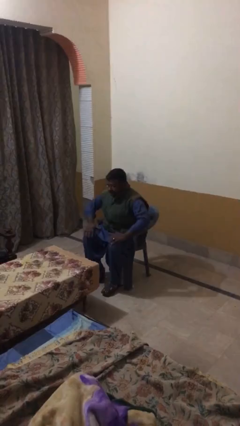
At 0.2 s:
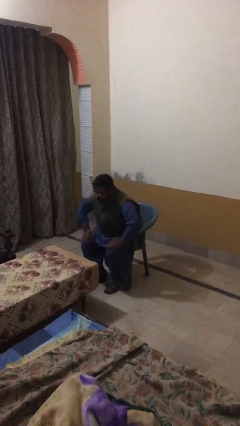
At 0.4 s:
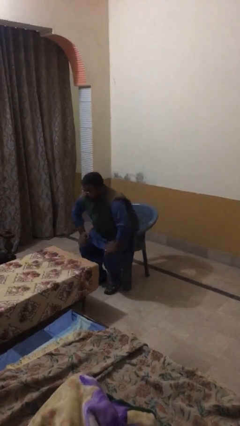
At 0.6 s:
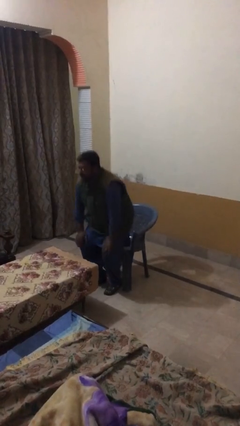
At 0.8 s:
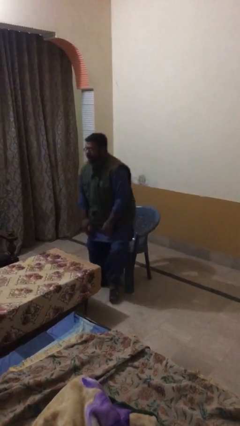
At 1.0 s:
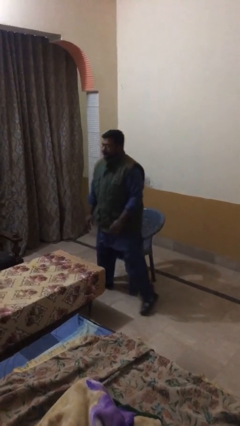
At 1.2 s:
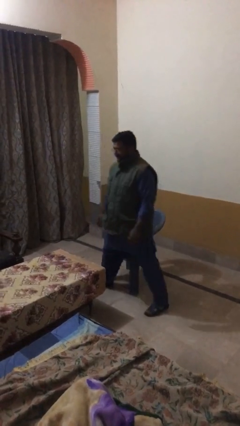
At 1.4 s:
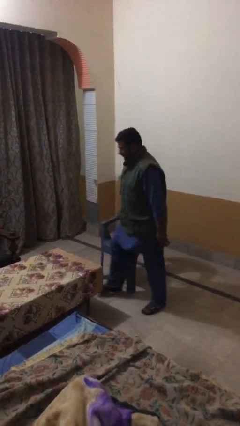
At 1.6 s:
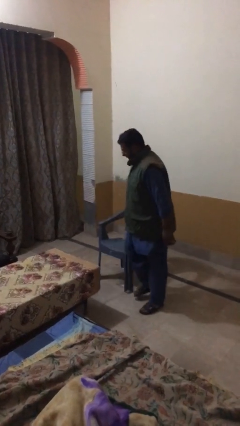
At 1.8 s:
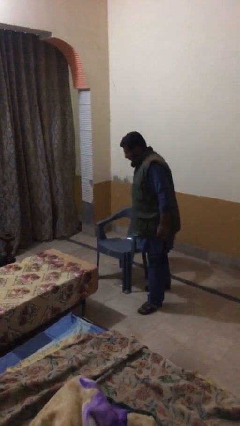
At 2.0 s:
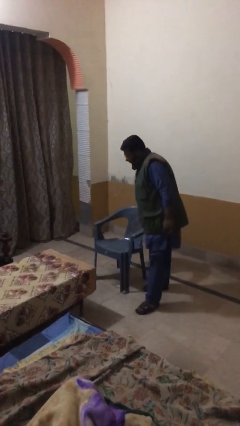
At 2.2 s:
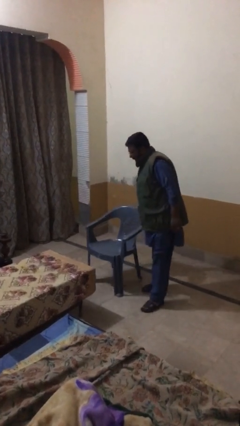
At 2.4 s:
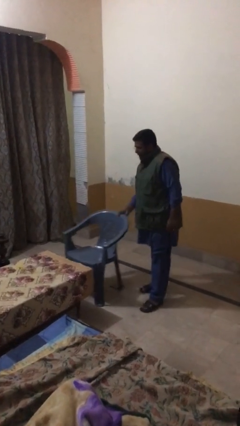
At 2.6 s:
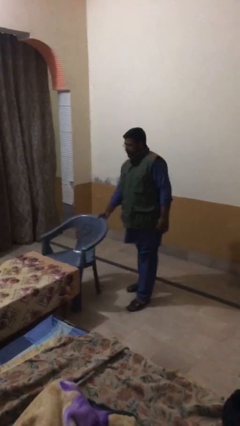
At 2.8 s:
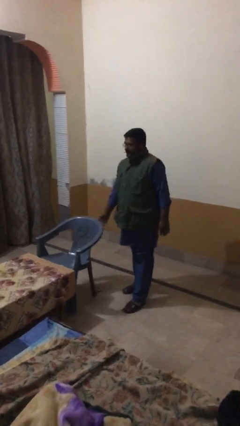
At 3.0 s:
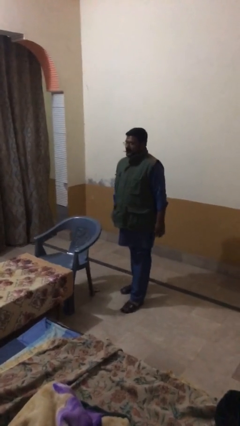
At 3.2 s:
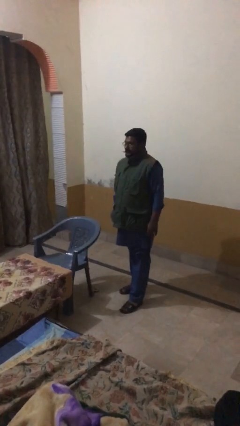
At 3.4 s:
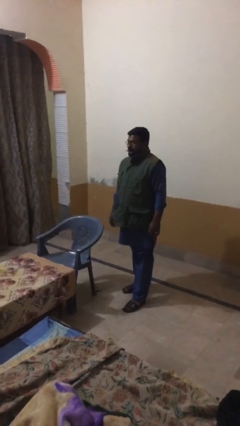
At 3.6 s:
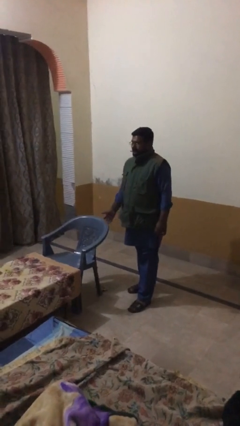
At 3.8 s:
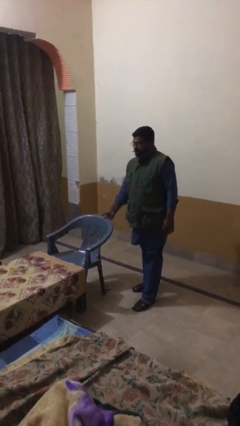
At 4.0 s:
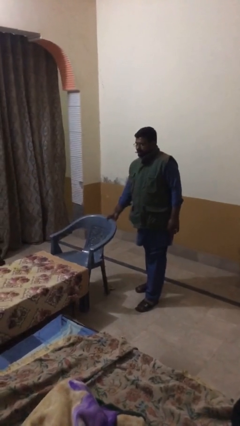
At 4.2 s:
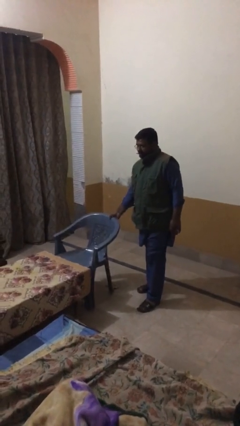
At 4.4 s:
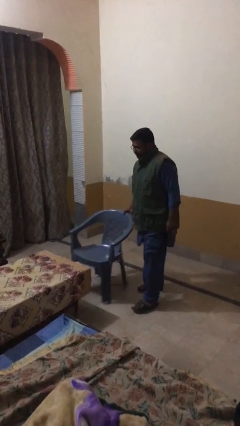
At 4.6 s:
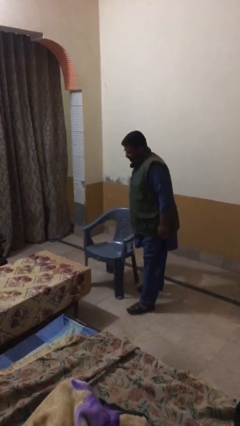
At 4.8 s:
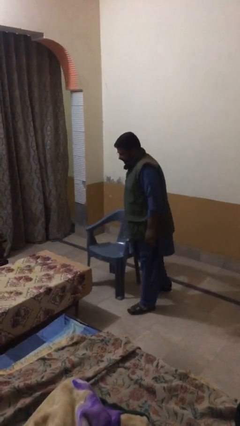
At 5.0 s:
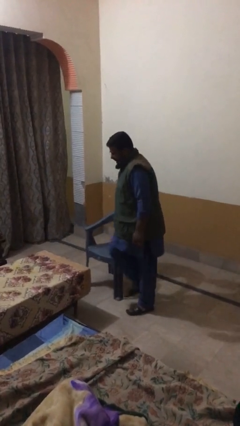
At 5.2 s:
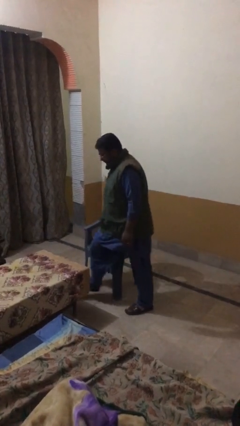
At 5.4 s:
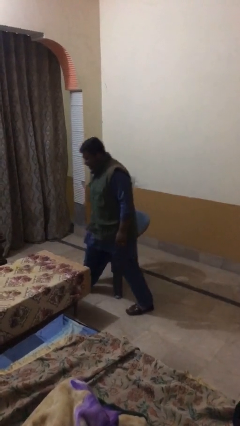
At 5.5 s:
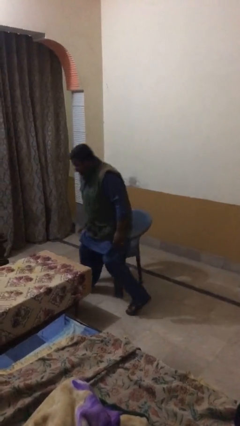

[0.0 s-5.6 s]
person stands up

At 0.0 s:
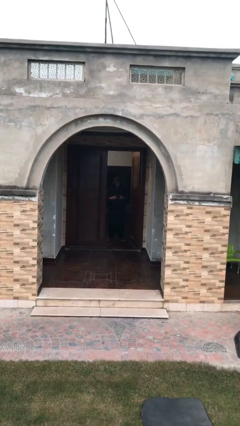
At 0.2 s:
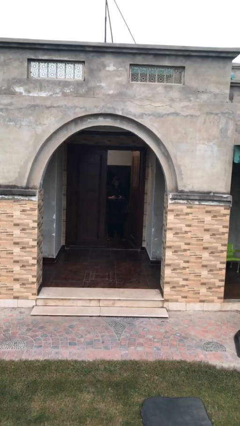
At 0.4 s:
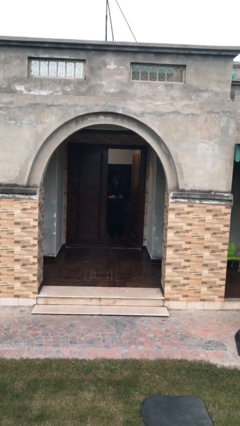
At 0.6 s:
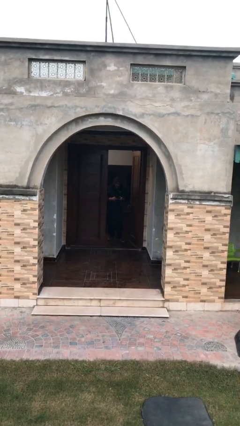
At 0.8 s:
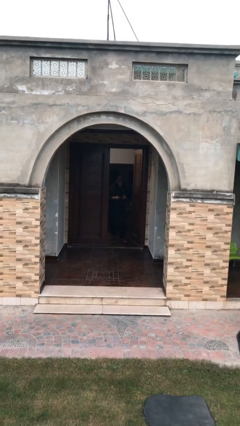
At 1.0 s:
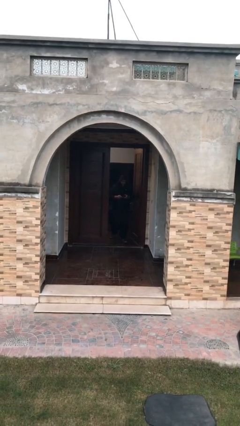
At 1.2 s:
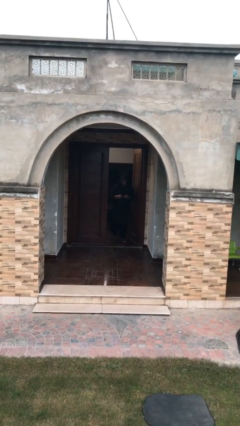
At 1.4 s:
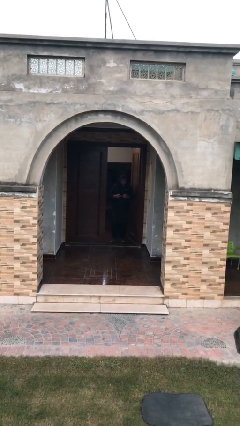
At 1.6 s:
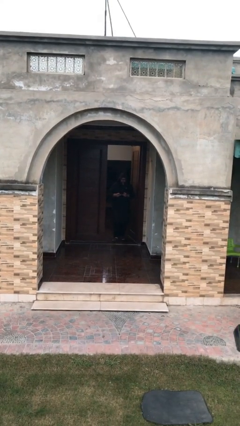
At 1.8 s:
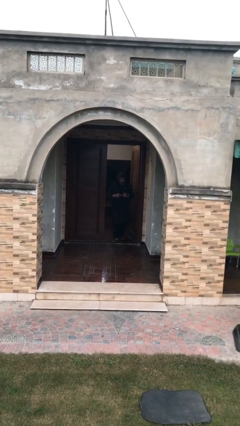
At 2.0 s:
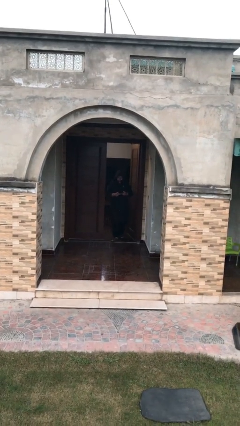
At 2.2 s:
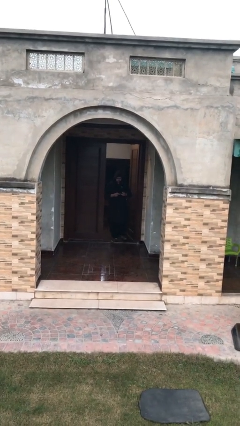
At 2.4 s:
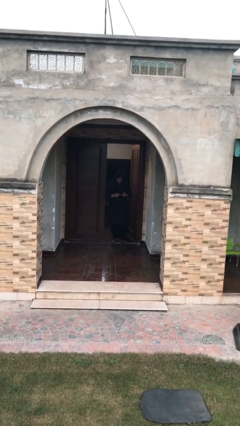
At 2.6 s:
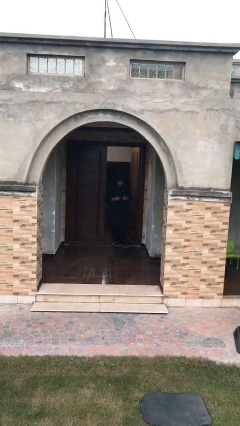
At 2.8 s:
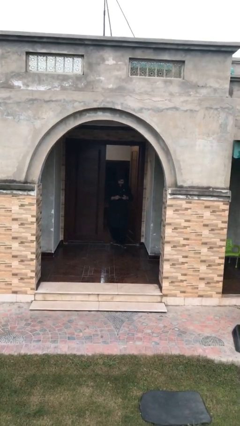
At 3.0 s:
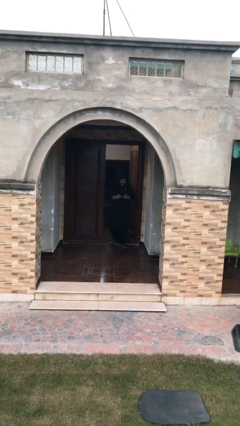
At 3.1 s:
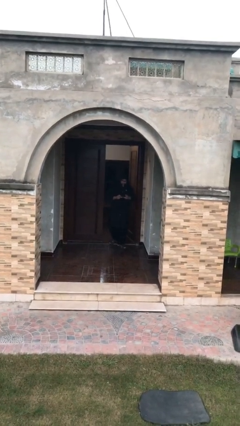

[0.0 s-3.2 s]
person enters scene through structure

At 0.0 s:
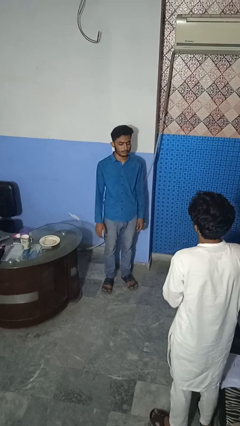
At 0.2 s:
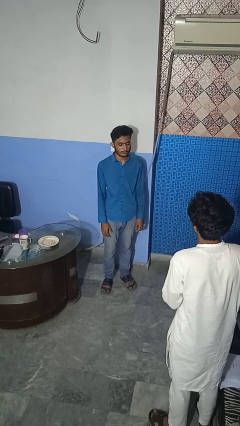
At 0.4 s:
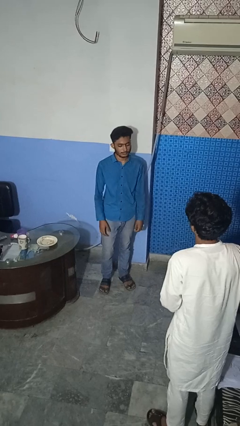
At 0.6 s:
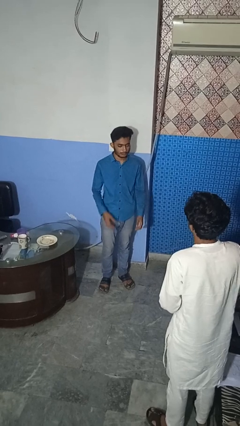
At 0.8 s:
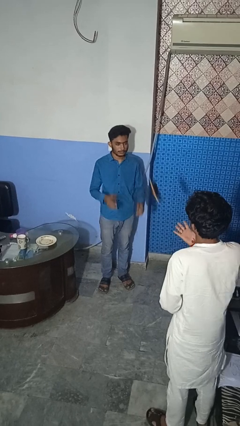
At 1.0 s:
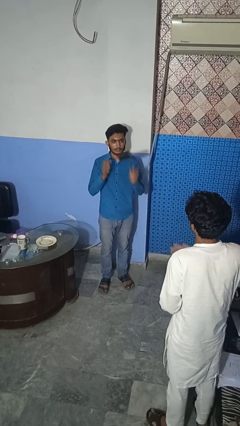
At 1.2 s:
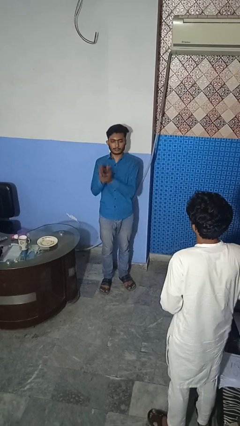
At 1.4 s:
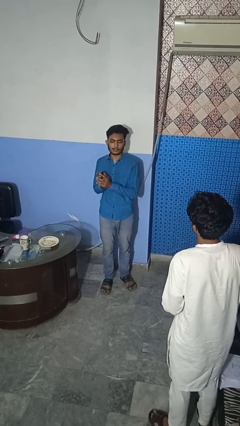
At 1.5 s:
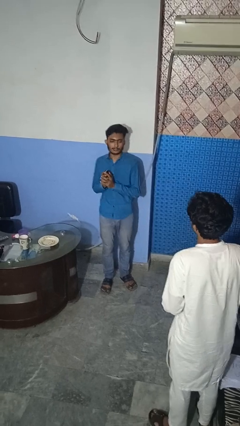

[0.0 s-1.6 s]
person catches object from person

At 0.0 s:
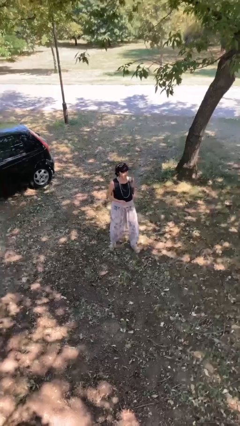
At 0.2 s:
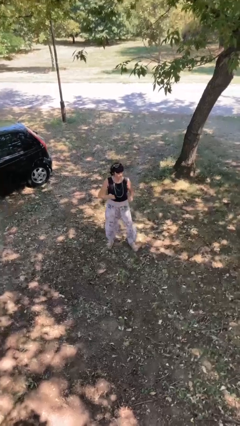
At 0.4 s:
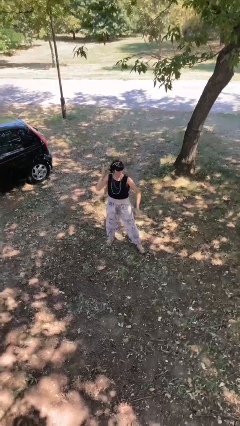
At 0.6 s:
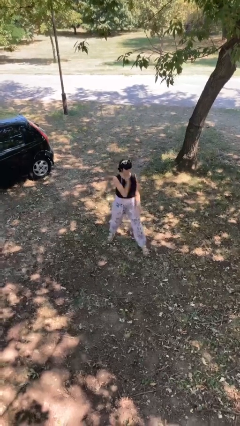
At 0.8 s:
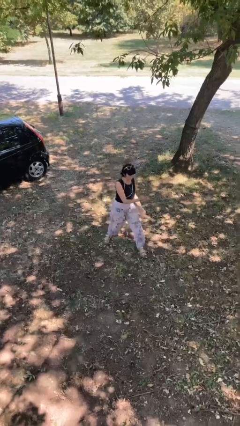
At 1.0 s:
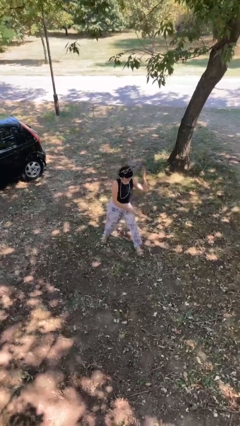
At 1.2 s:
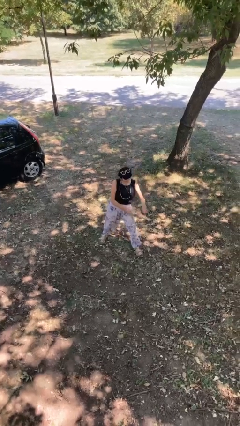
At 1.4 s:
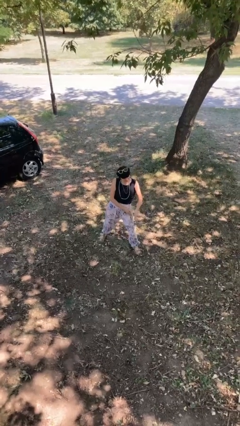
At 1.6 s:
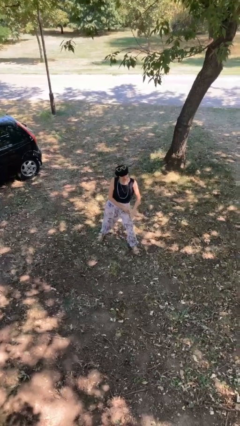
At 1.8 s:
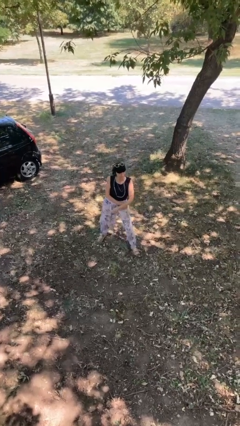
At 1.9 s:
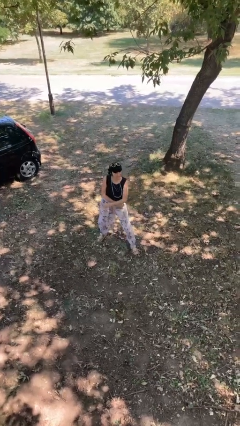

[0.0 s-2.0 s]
person karate chop

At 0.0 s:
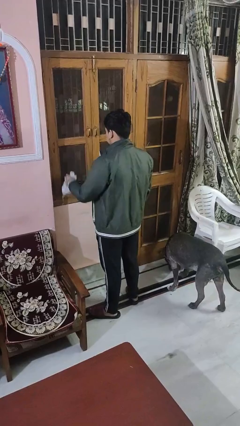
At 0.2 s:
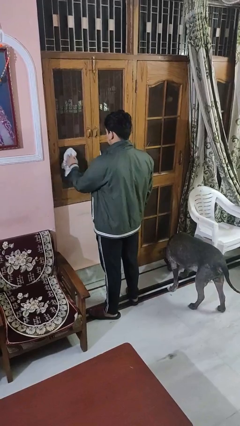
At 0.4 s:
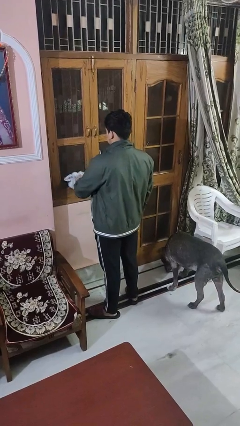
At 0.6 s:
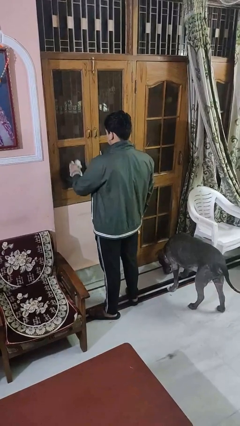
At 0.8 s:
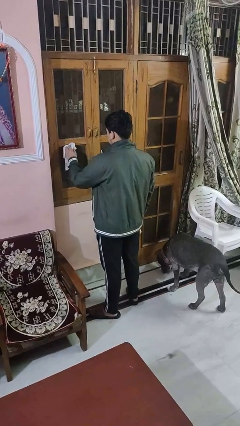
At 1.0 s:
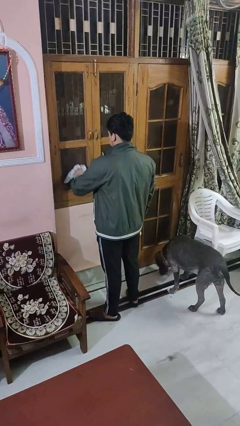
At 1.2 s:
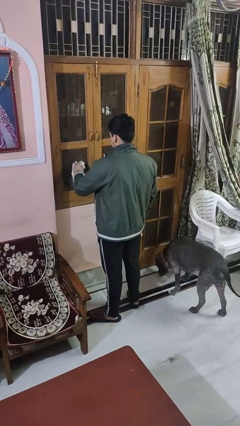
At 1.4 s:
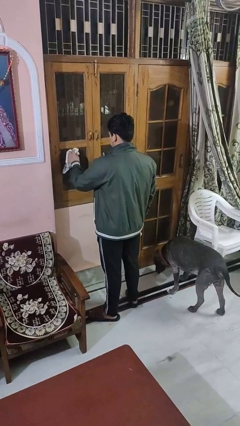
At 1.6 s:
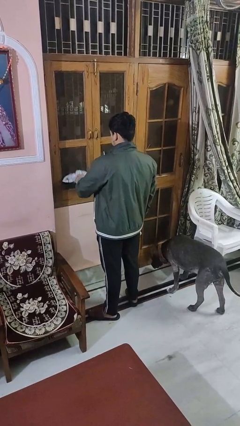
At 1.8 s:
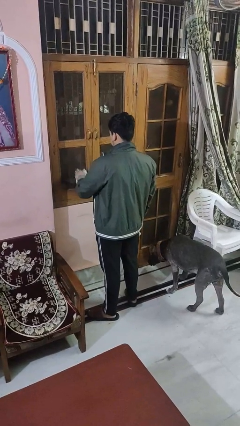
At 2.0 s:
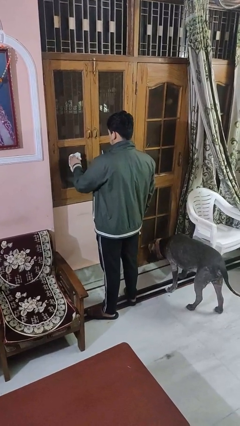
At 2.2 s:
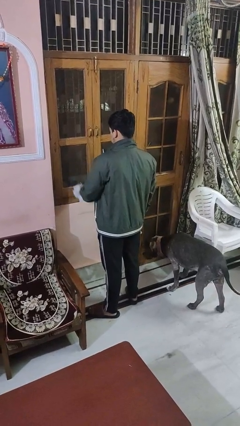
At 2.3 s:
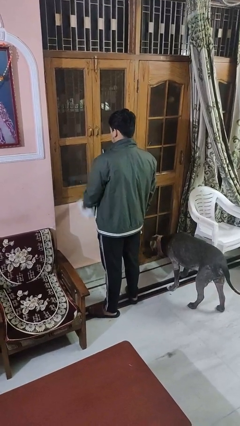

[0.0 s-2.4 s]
person washes window

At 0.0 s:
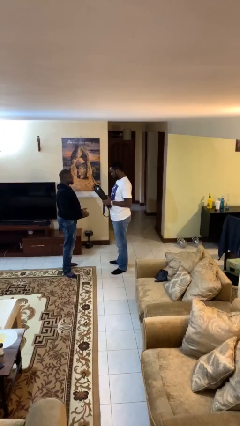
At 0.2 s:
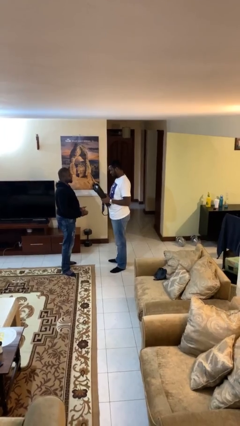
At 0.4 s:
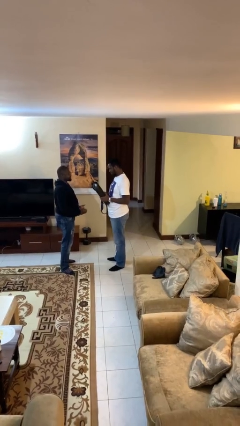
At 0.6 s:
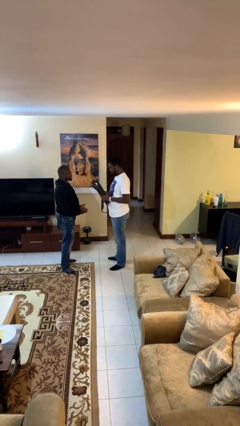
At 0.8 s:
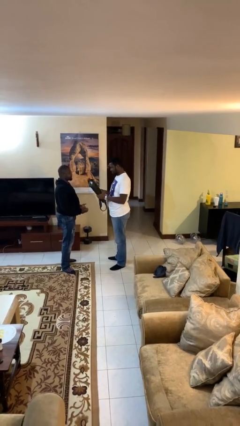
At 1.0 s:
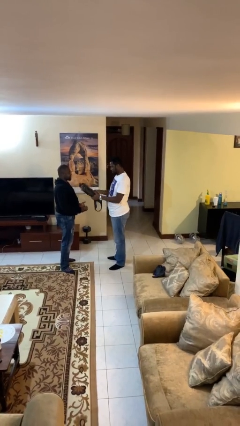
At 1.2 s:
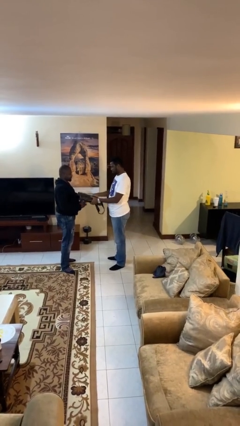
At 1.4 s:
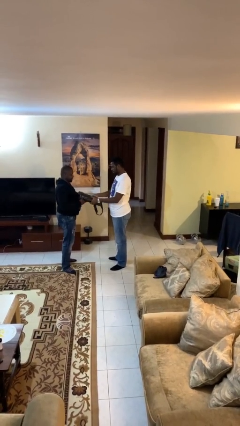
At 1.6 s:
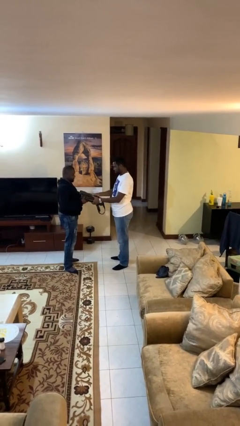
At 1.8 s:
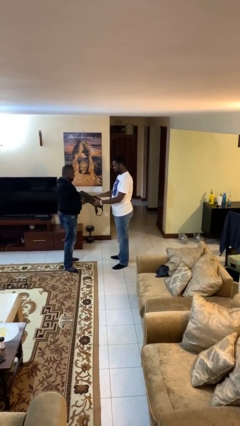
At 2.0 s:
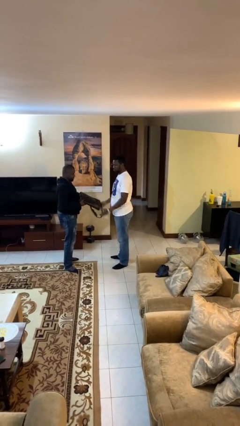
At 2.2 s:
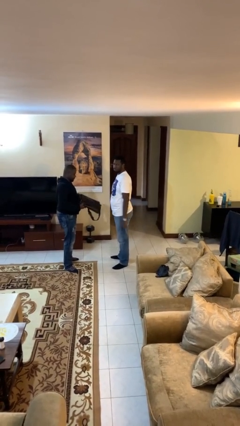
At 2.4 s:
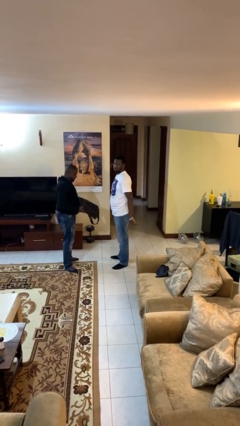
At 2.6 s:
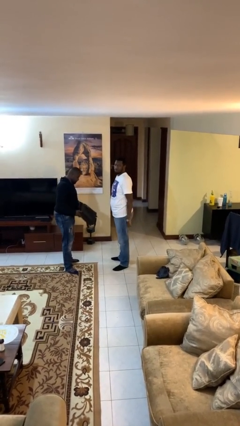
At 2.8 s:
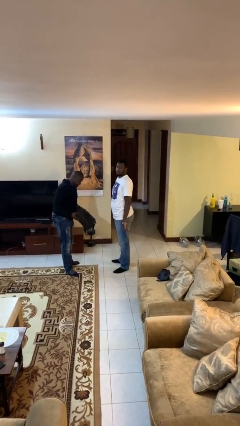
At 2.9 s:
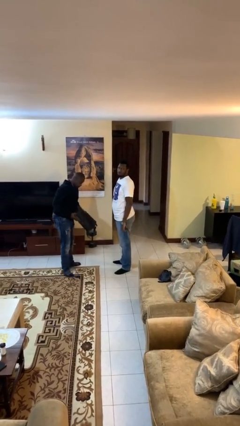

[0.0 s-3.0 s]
person transfers object to person
